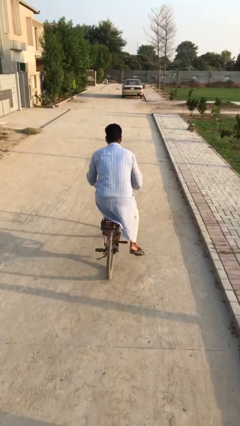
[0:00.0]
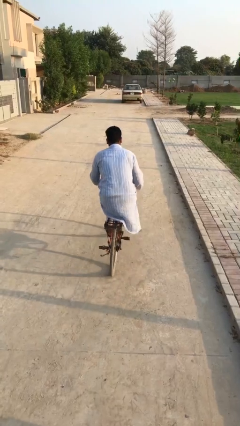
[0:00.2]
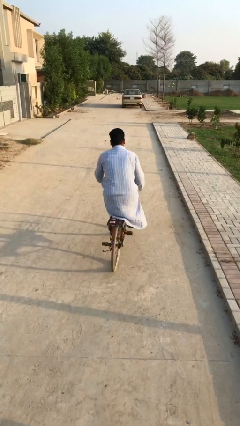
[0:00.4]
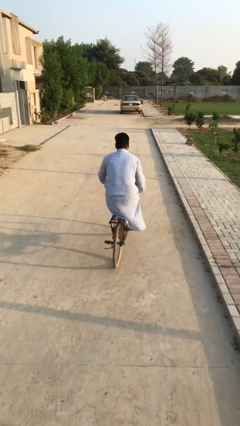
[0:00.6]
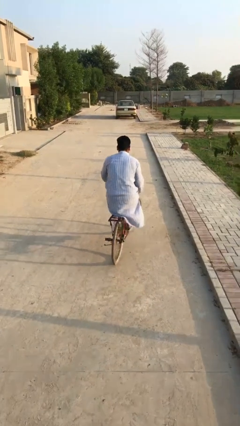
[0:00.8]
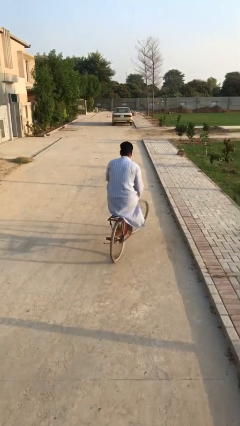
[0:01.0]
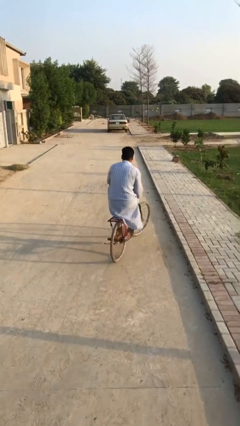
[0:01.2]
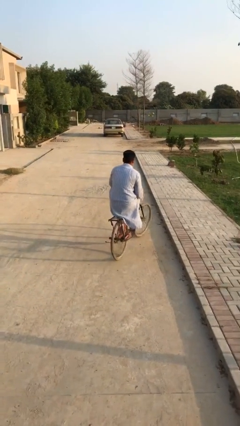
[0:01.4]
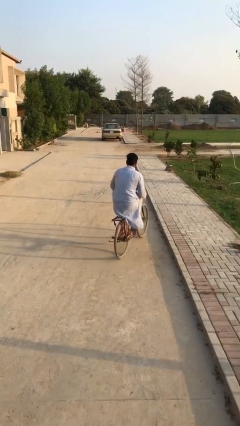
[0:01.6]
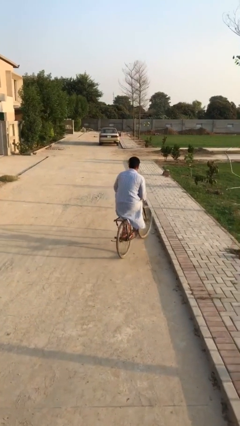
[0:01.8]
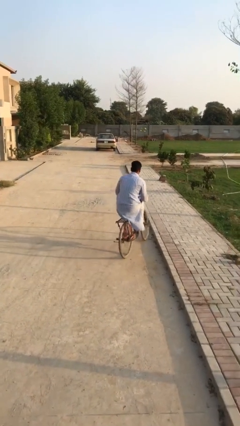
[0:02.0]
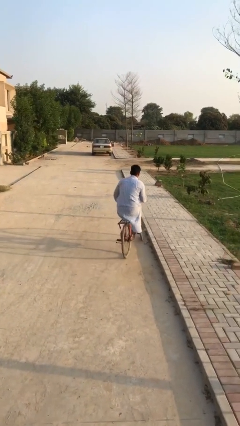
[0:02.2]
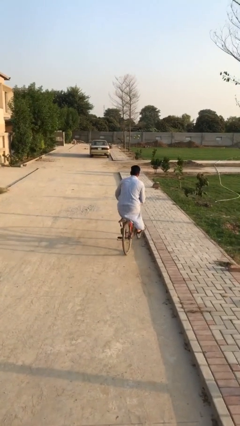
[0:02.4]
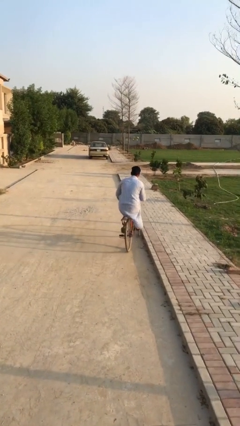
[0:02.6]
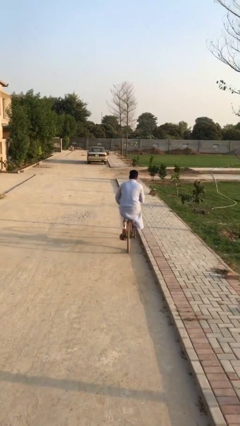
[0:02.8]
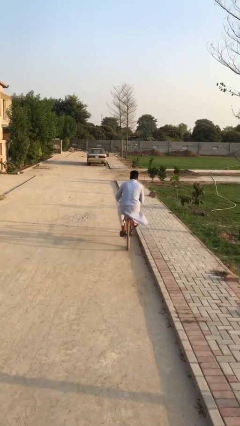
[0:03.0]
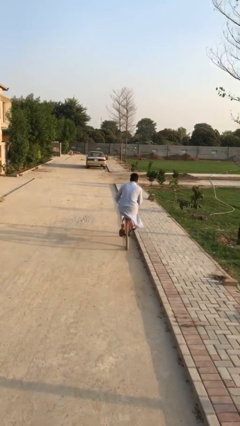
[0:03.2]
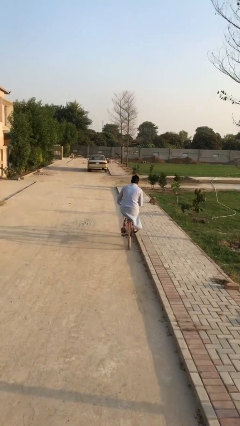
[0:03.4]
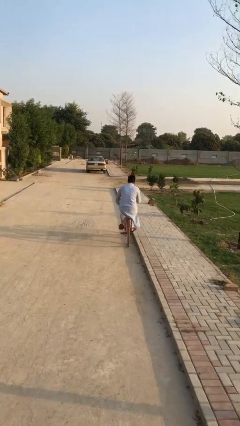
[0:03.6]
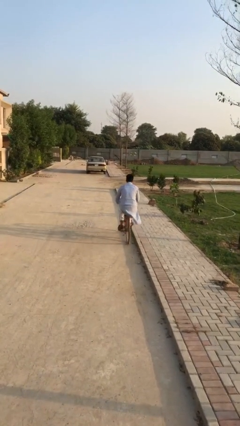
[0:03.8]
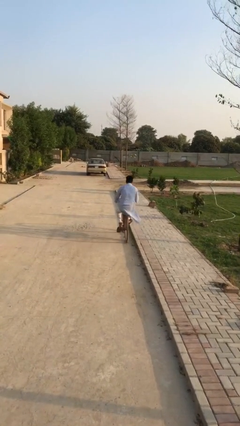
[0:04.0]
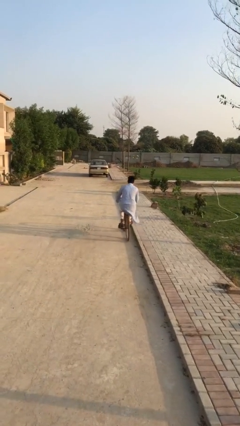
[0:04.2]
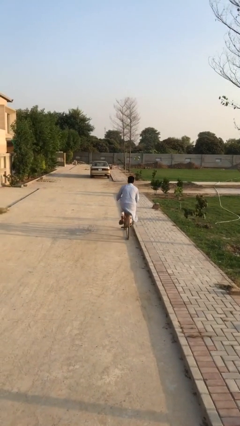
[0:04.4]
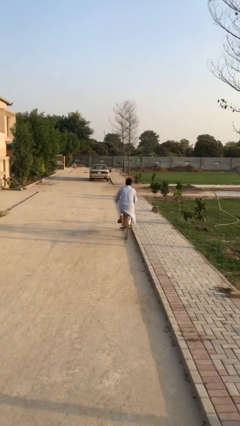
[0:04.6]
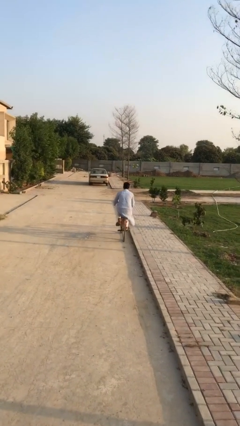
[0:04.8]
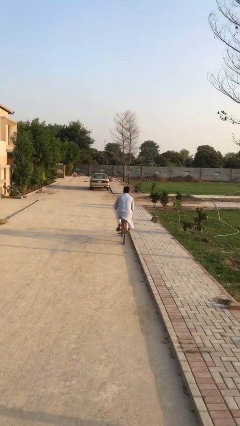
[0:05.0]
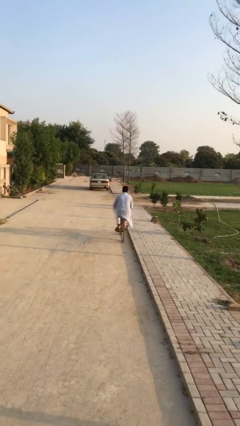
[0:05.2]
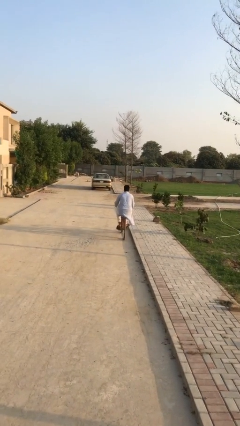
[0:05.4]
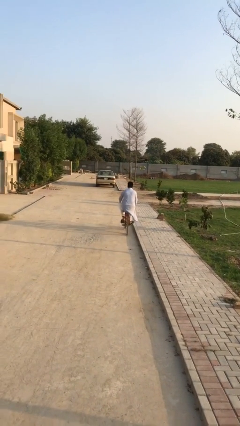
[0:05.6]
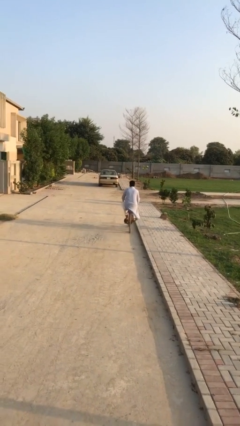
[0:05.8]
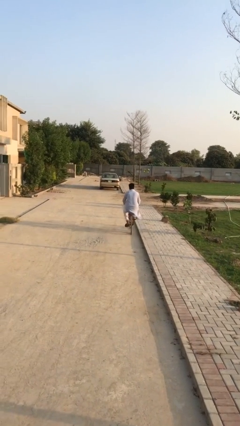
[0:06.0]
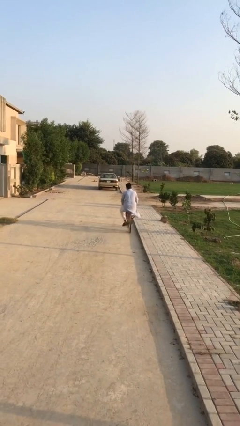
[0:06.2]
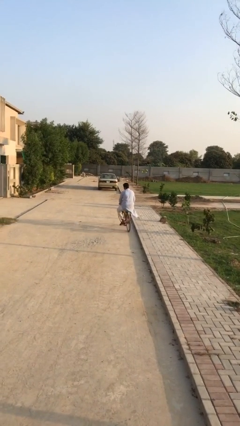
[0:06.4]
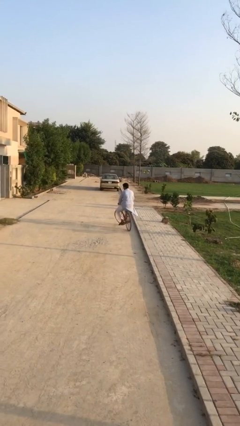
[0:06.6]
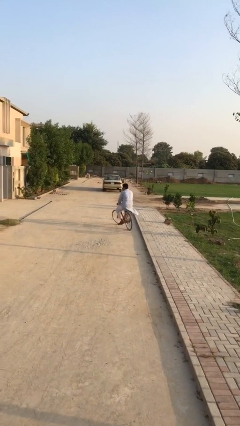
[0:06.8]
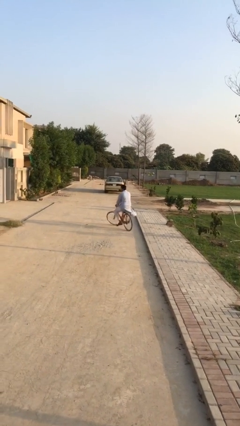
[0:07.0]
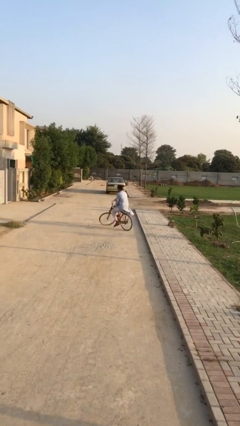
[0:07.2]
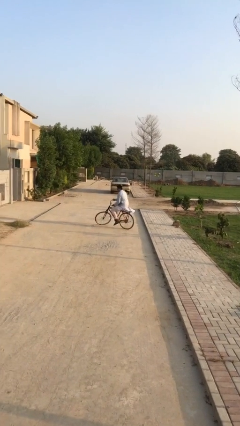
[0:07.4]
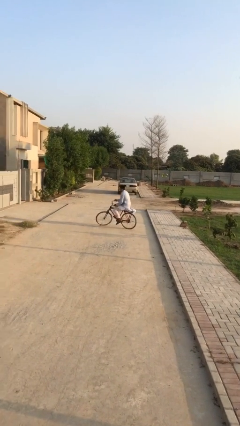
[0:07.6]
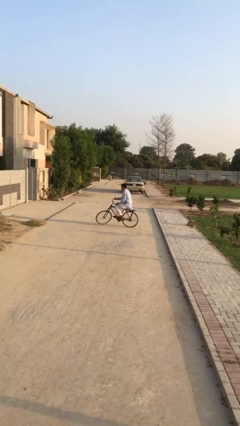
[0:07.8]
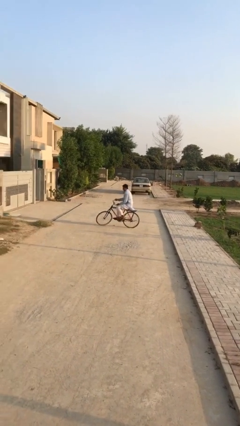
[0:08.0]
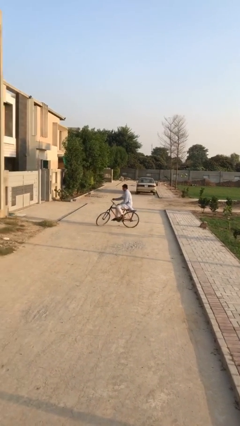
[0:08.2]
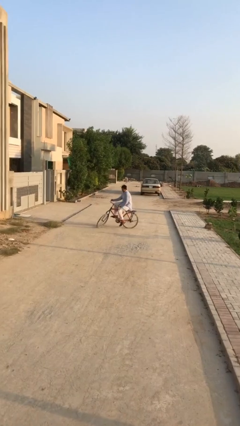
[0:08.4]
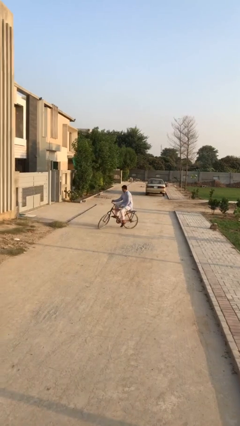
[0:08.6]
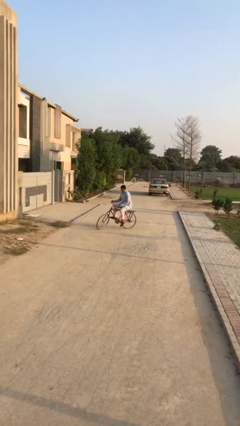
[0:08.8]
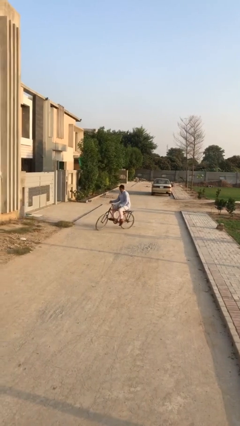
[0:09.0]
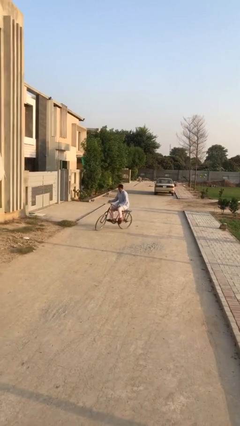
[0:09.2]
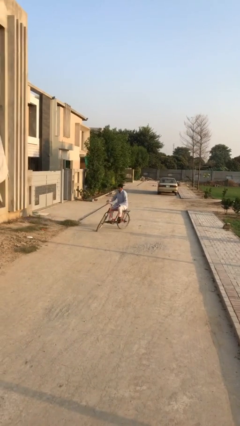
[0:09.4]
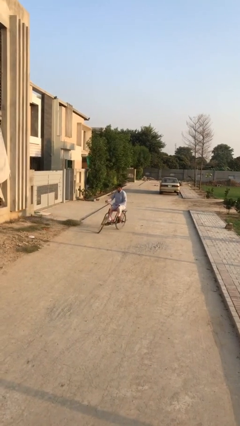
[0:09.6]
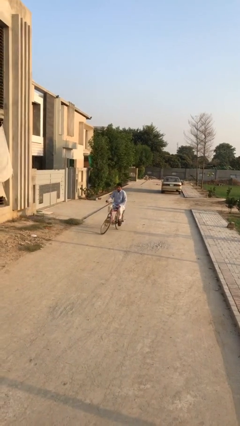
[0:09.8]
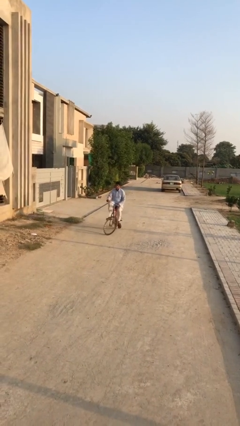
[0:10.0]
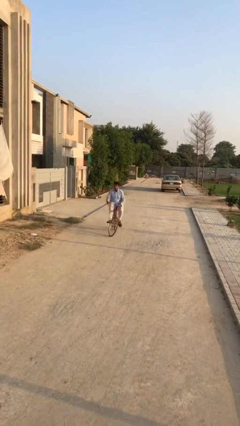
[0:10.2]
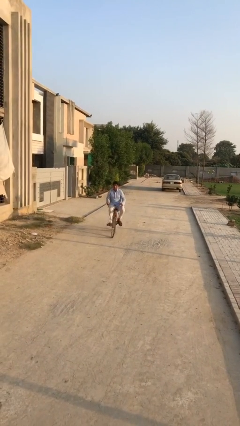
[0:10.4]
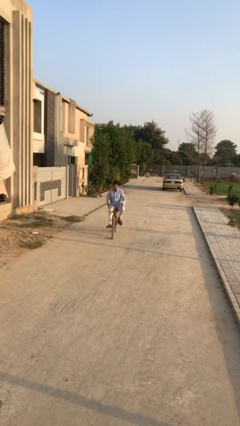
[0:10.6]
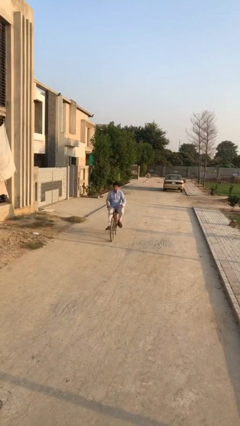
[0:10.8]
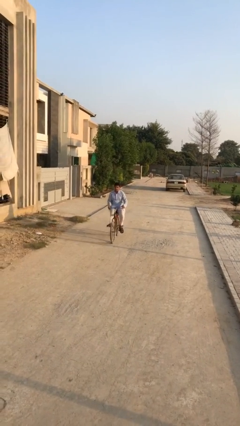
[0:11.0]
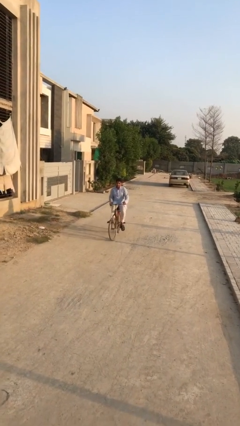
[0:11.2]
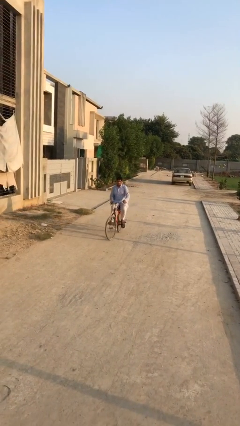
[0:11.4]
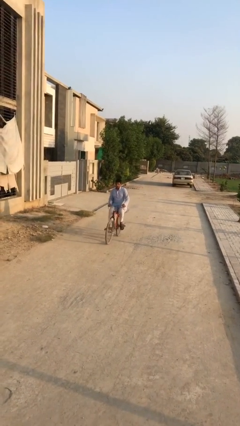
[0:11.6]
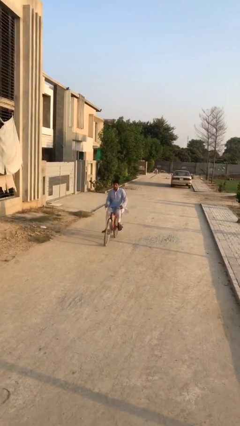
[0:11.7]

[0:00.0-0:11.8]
person rides bicycle

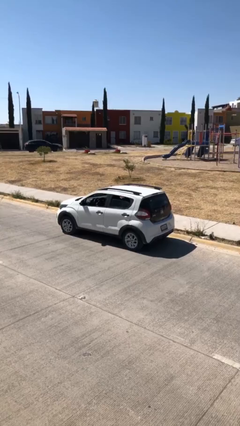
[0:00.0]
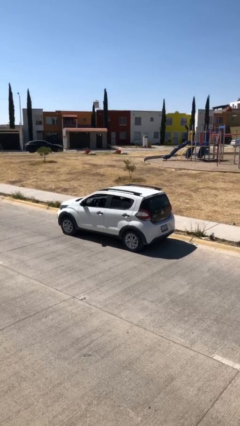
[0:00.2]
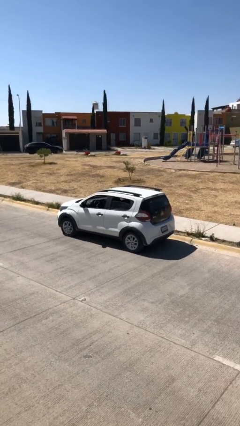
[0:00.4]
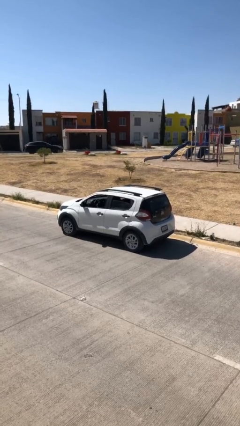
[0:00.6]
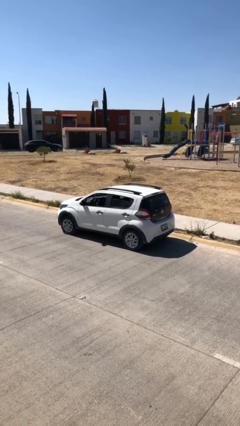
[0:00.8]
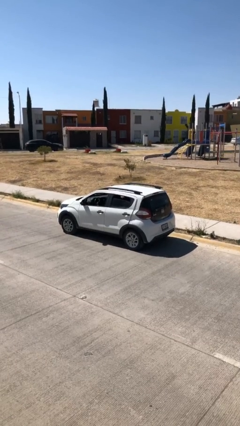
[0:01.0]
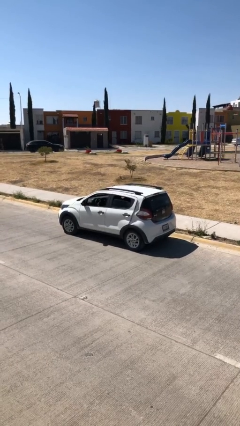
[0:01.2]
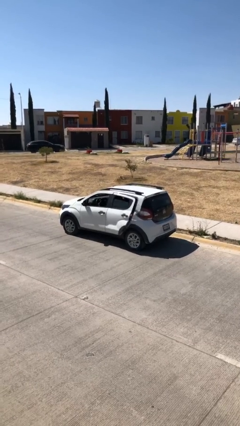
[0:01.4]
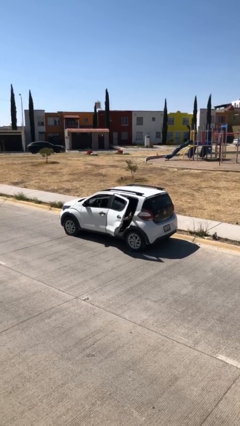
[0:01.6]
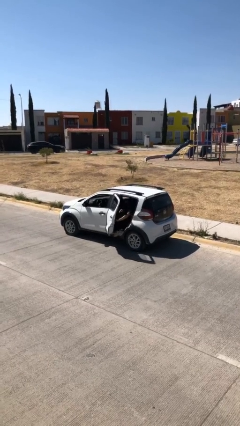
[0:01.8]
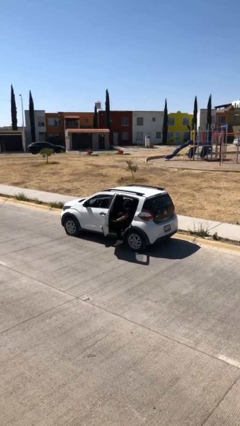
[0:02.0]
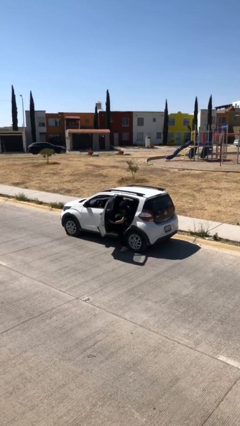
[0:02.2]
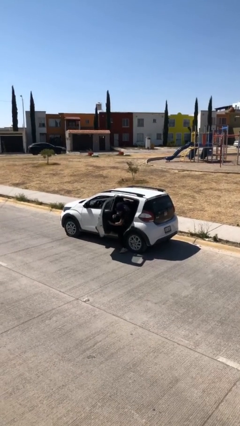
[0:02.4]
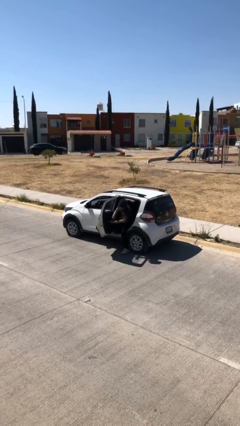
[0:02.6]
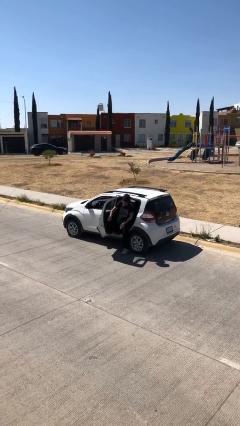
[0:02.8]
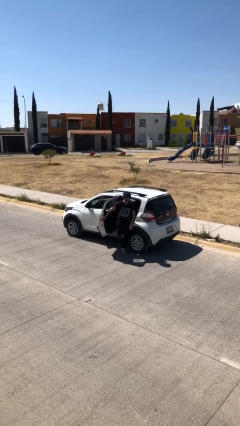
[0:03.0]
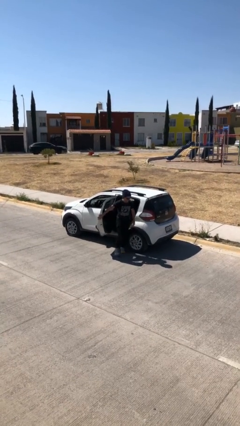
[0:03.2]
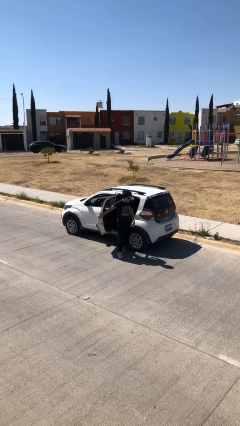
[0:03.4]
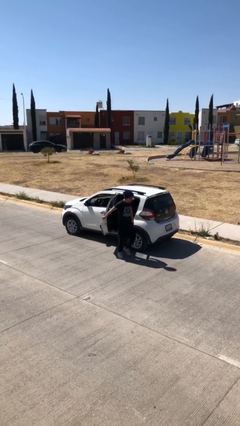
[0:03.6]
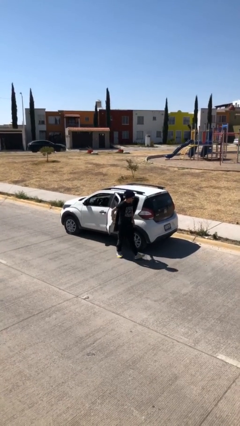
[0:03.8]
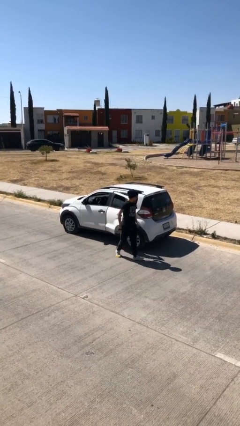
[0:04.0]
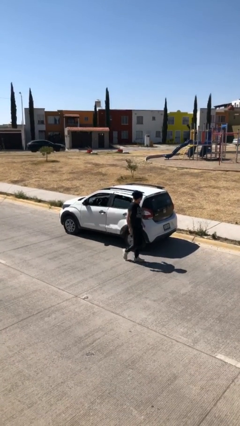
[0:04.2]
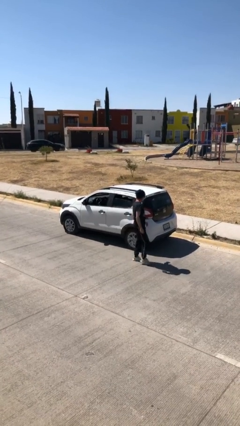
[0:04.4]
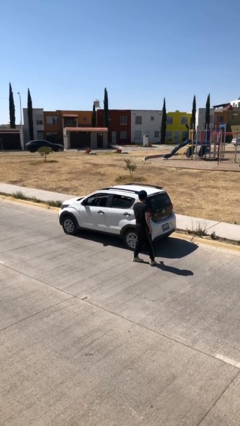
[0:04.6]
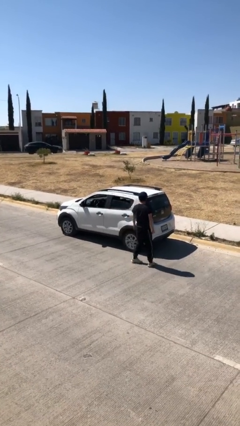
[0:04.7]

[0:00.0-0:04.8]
car drops off person

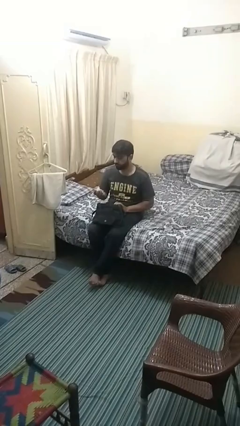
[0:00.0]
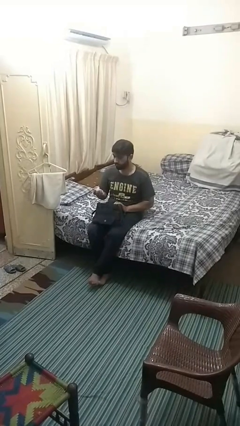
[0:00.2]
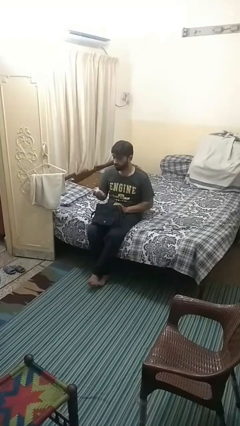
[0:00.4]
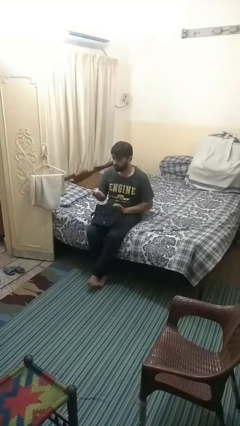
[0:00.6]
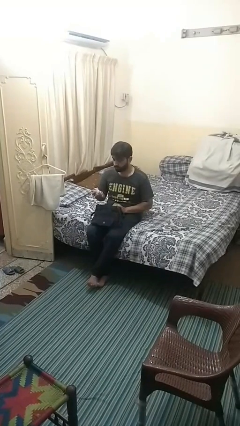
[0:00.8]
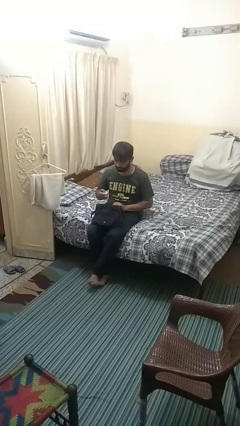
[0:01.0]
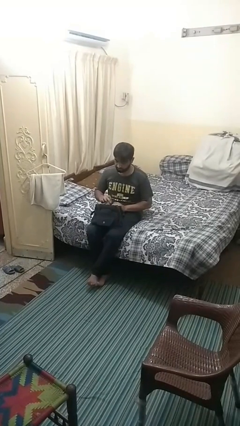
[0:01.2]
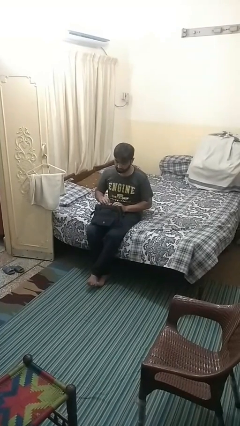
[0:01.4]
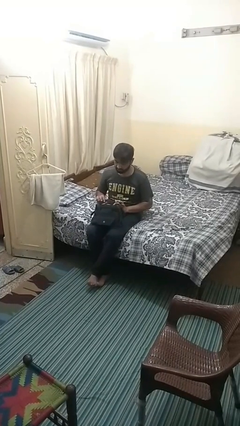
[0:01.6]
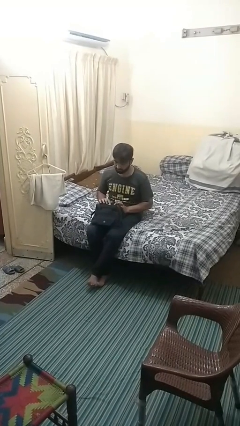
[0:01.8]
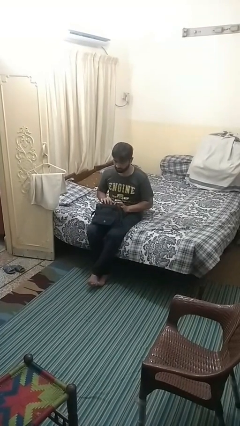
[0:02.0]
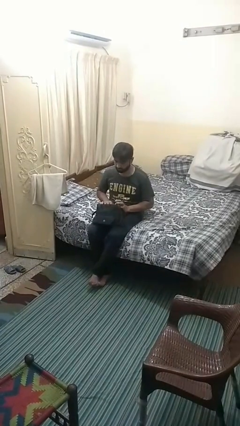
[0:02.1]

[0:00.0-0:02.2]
person puts object into purse
